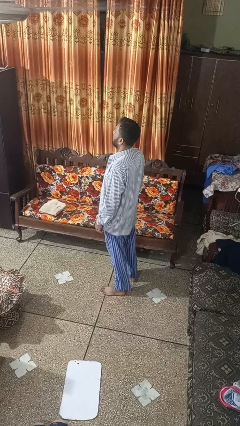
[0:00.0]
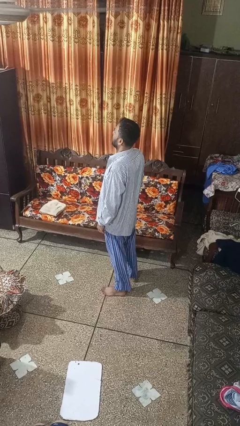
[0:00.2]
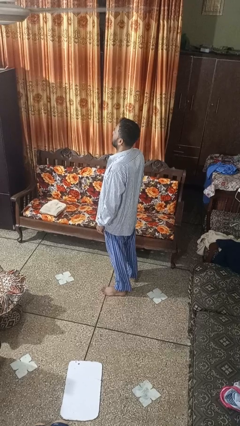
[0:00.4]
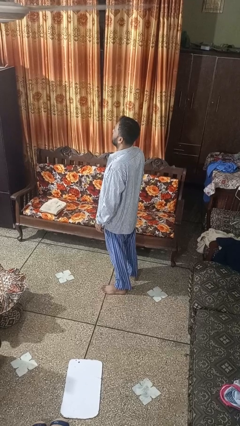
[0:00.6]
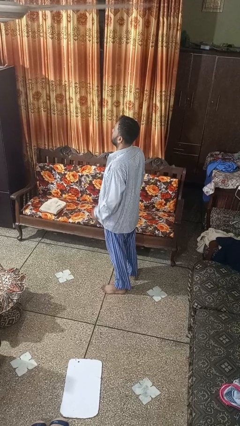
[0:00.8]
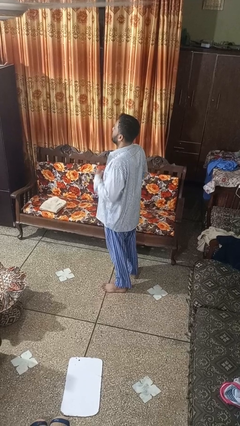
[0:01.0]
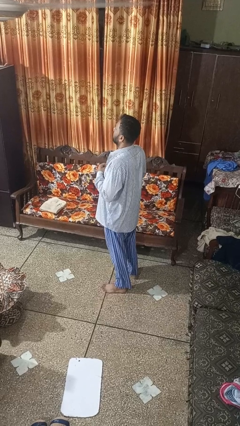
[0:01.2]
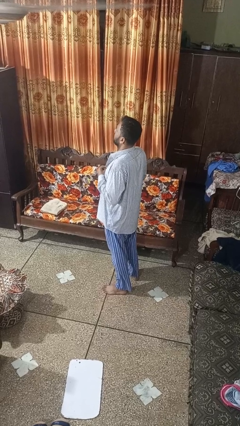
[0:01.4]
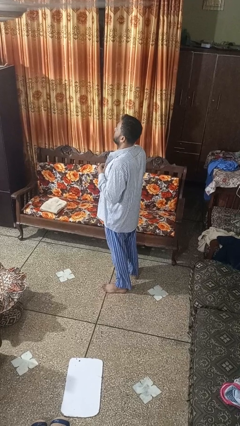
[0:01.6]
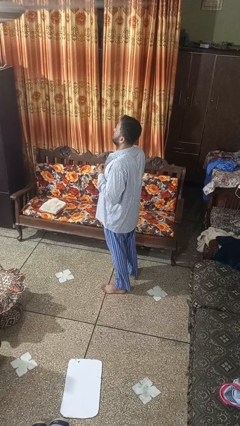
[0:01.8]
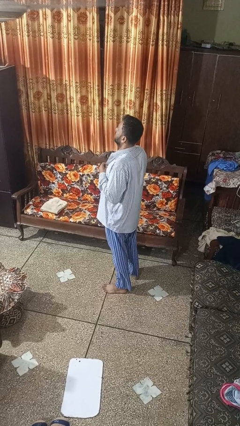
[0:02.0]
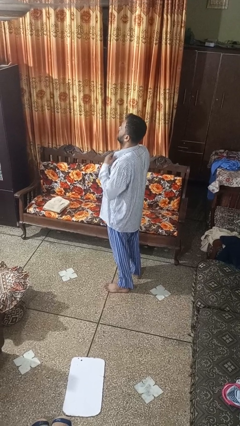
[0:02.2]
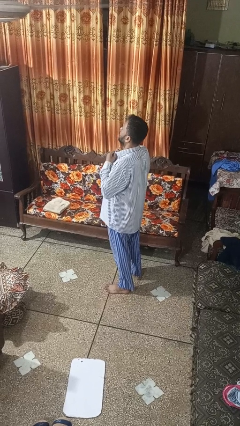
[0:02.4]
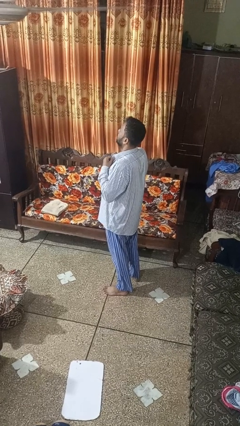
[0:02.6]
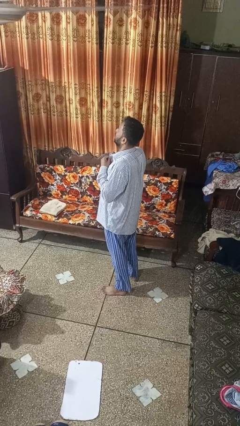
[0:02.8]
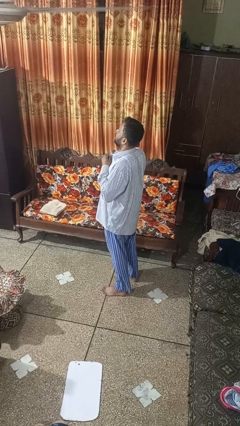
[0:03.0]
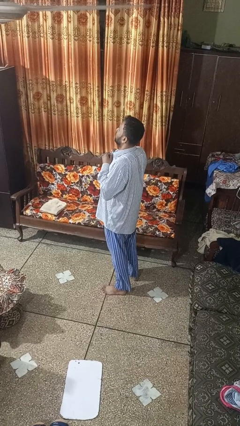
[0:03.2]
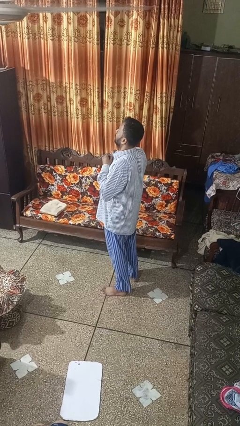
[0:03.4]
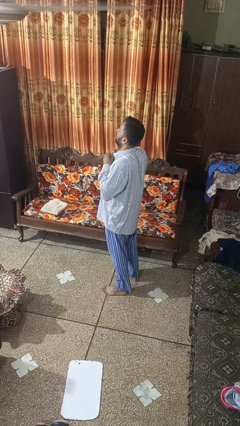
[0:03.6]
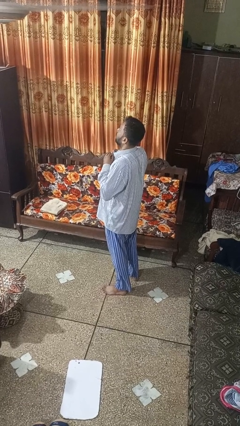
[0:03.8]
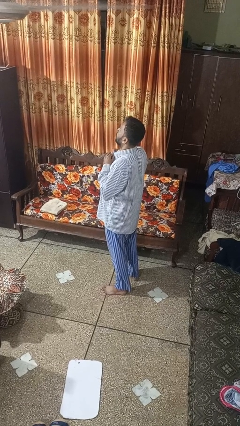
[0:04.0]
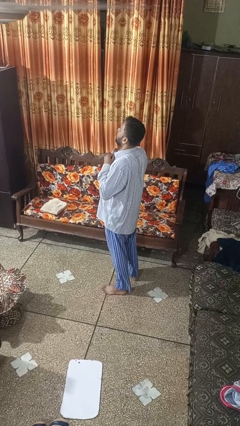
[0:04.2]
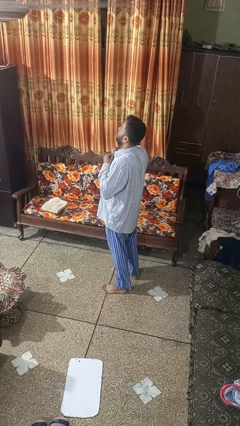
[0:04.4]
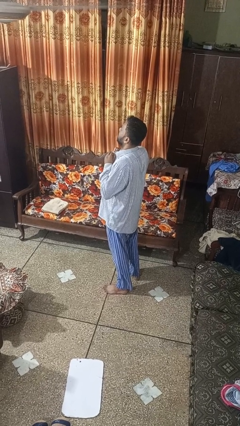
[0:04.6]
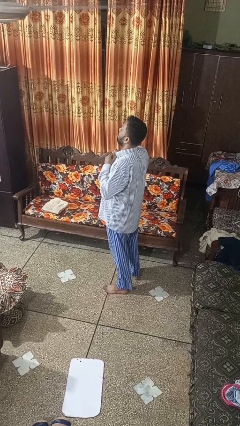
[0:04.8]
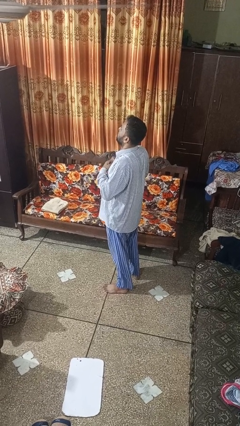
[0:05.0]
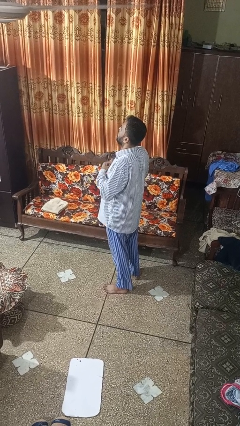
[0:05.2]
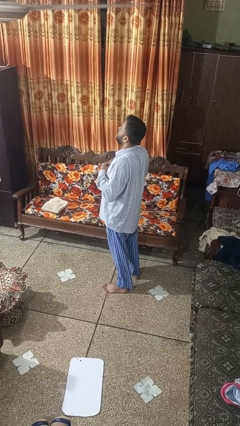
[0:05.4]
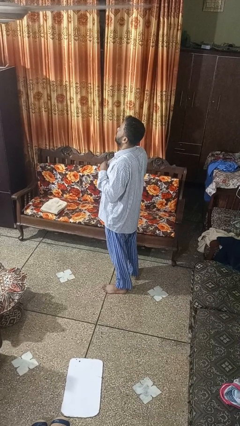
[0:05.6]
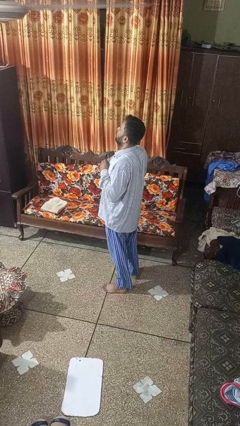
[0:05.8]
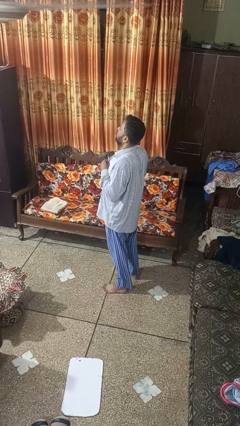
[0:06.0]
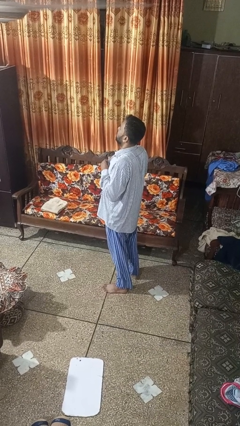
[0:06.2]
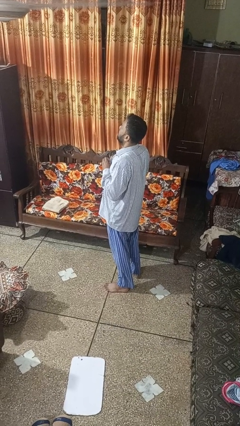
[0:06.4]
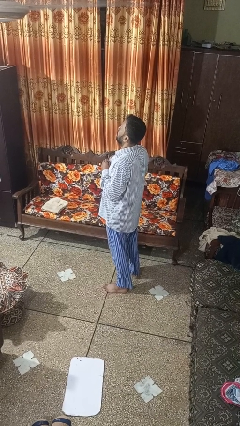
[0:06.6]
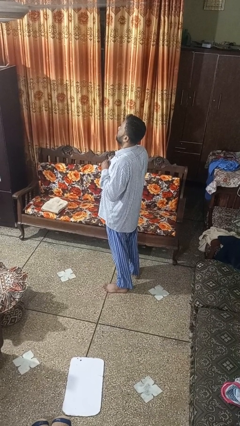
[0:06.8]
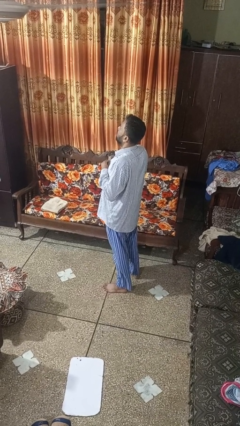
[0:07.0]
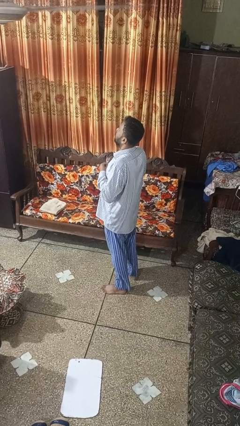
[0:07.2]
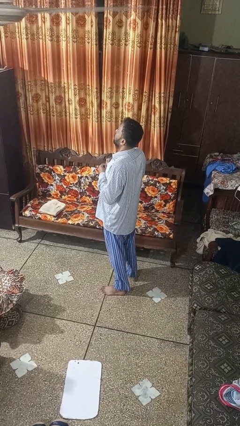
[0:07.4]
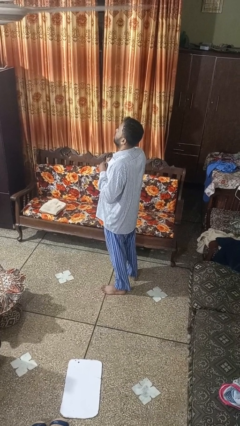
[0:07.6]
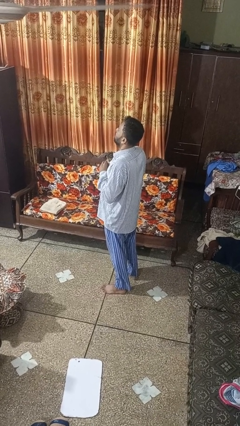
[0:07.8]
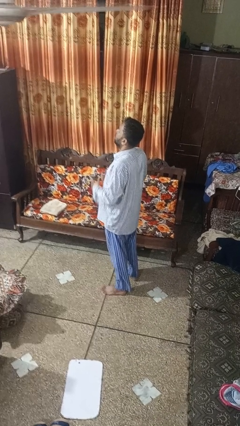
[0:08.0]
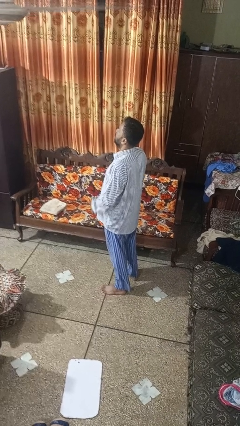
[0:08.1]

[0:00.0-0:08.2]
person buttons shirt

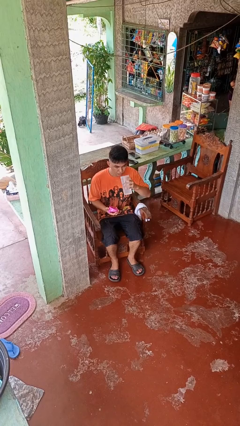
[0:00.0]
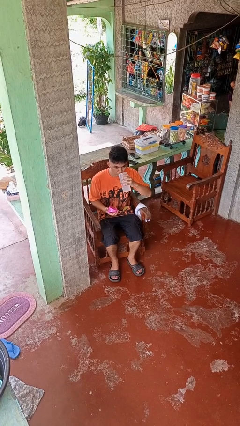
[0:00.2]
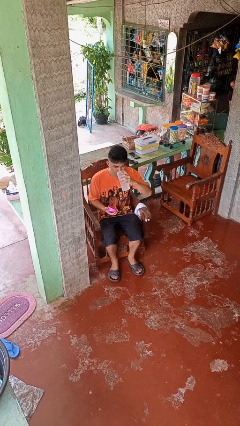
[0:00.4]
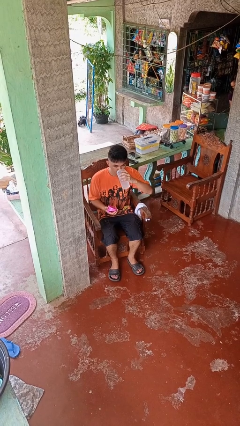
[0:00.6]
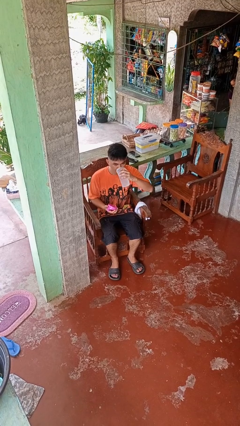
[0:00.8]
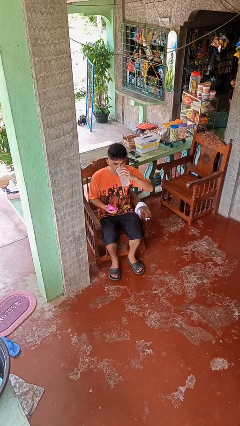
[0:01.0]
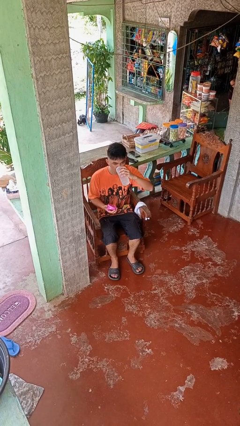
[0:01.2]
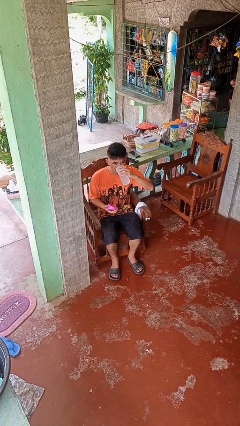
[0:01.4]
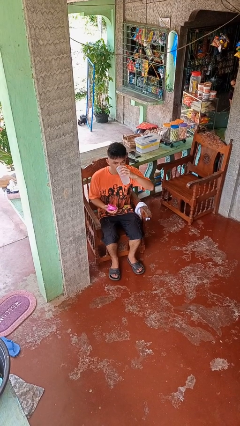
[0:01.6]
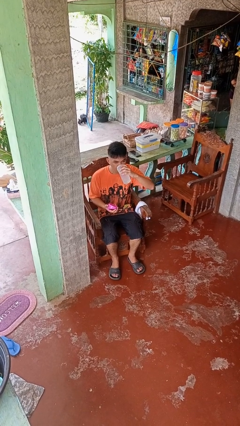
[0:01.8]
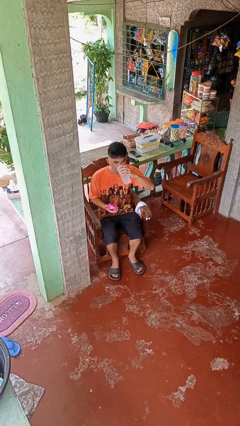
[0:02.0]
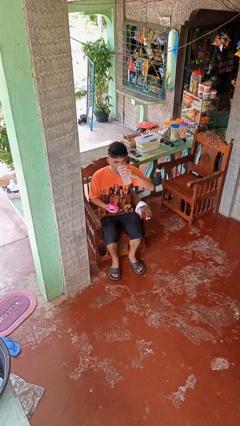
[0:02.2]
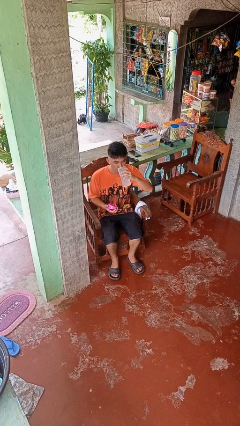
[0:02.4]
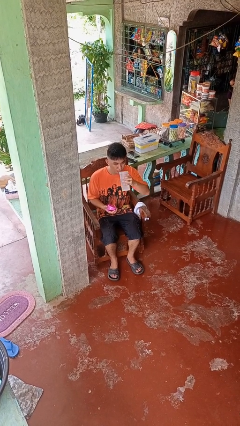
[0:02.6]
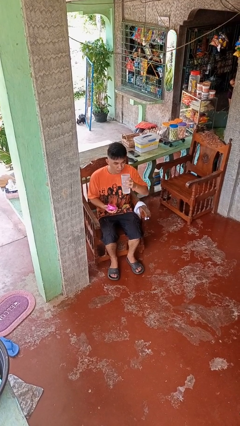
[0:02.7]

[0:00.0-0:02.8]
person drinks from bottle

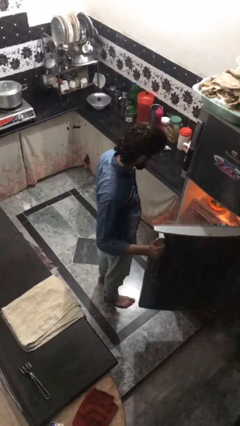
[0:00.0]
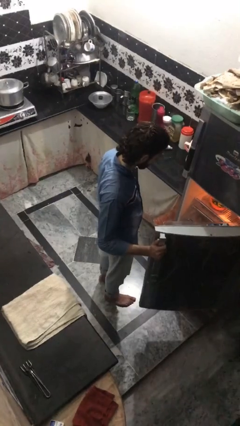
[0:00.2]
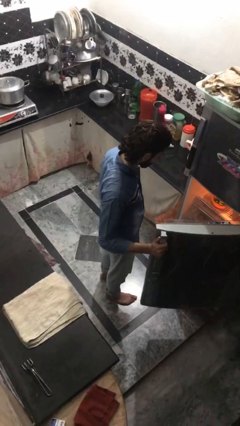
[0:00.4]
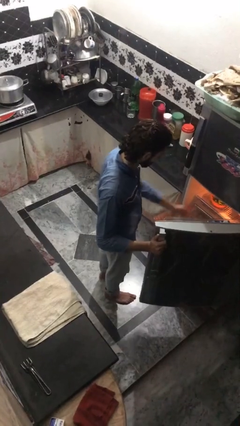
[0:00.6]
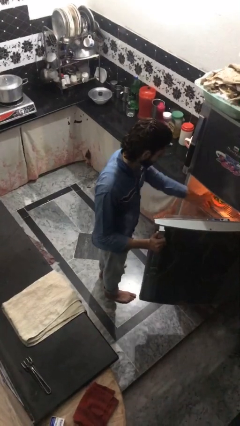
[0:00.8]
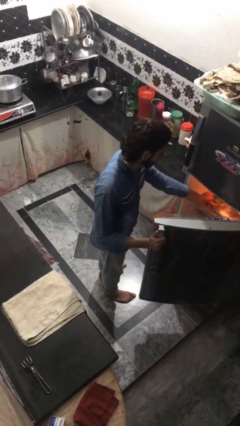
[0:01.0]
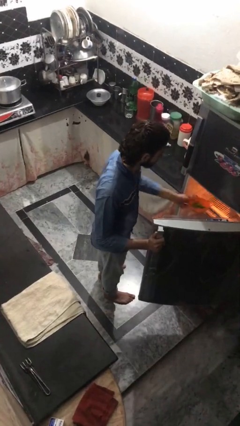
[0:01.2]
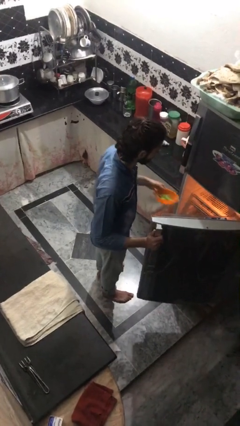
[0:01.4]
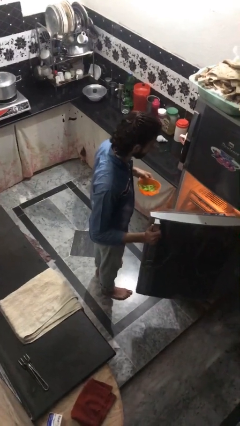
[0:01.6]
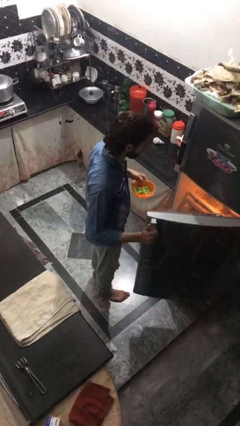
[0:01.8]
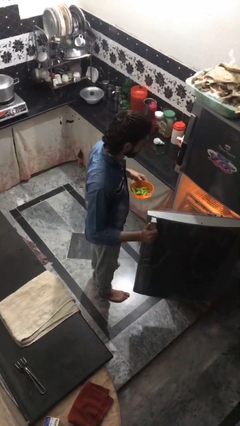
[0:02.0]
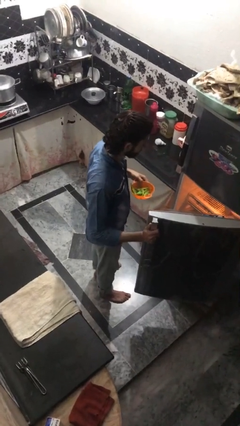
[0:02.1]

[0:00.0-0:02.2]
person takes object from refrigerator

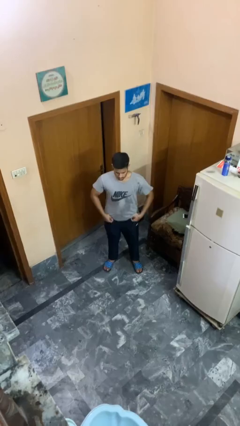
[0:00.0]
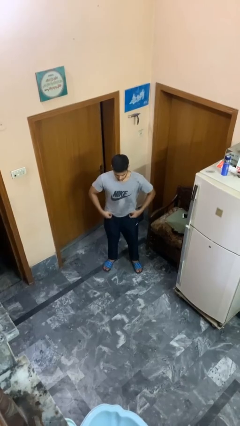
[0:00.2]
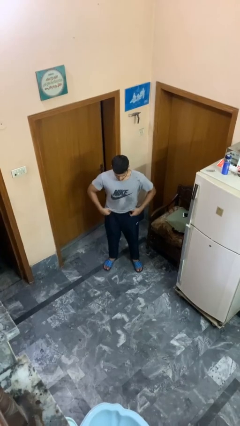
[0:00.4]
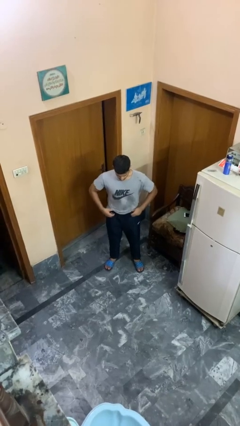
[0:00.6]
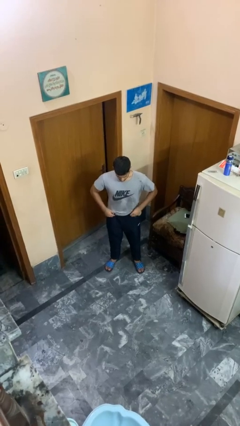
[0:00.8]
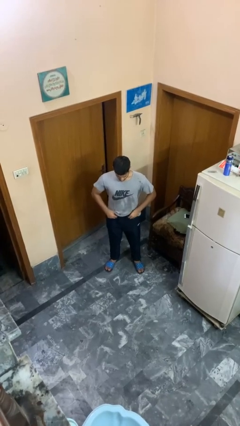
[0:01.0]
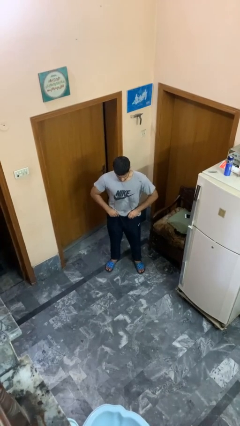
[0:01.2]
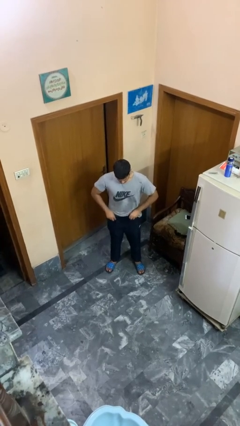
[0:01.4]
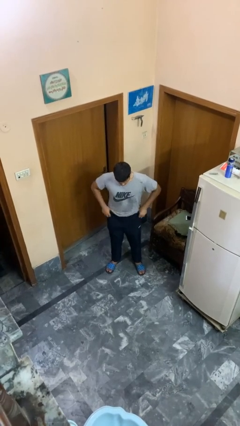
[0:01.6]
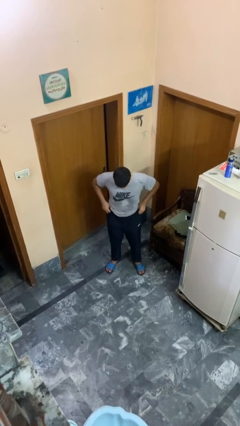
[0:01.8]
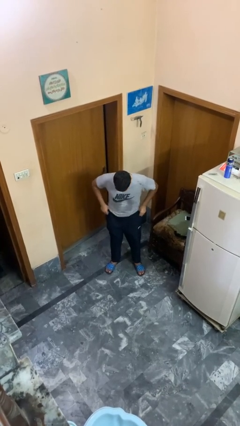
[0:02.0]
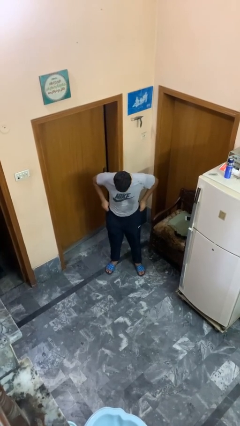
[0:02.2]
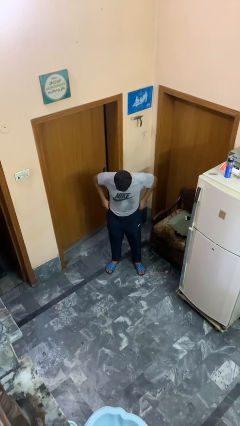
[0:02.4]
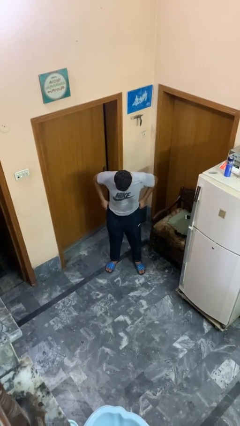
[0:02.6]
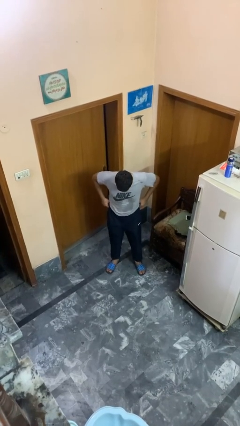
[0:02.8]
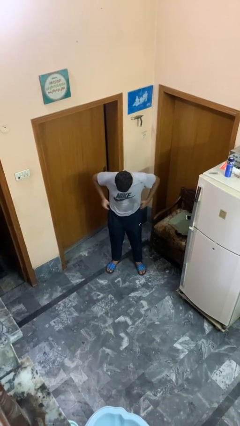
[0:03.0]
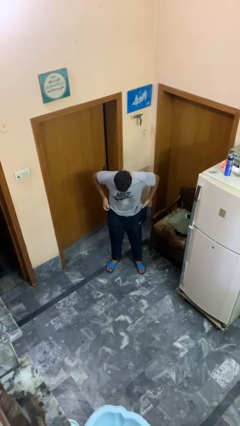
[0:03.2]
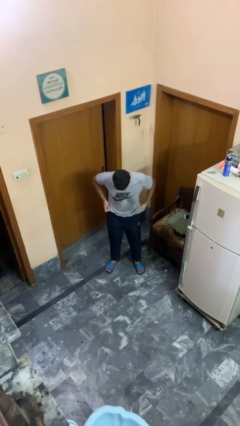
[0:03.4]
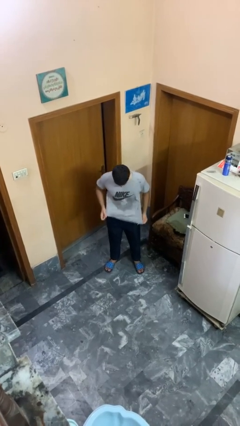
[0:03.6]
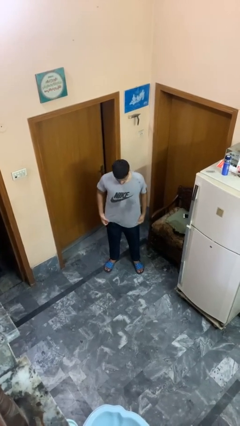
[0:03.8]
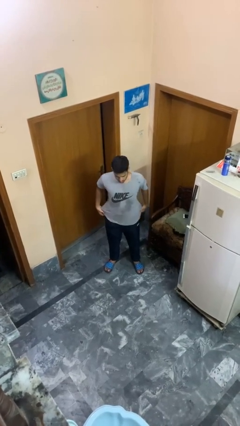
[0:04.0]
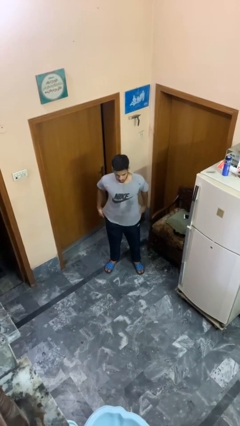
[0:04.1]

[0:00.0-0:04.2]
person hikes up pants
